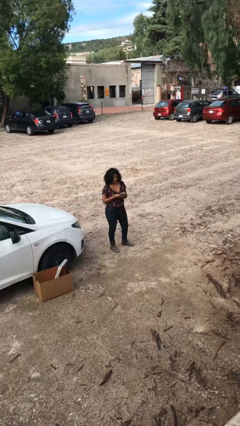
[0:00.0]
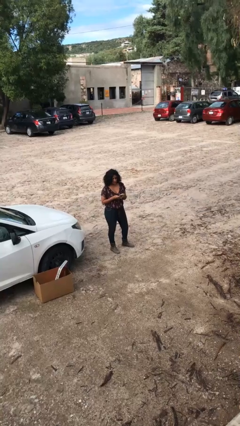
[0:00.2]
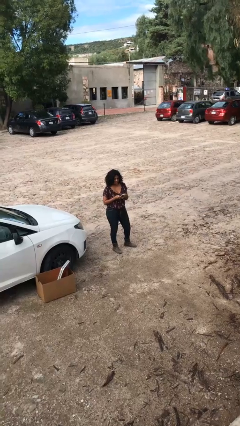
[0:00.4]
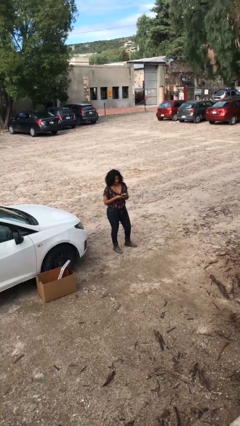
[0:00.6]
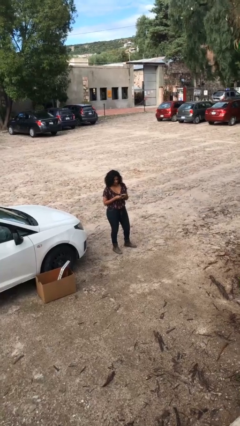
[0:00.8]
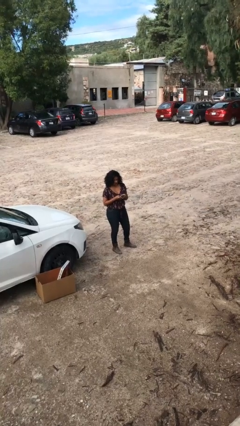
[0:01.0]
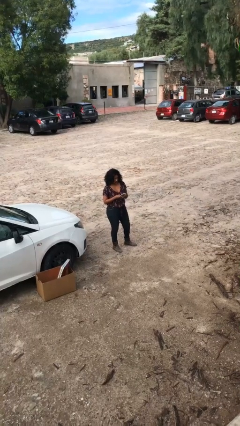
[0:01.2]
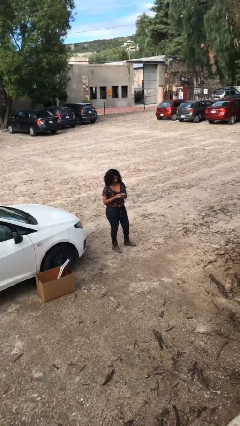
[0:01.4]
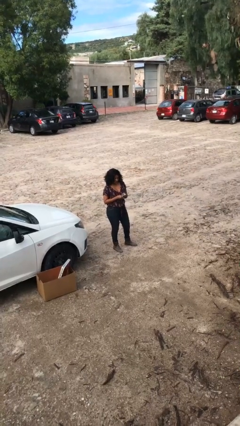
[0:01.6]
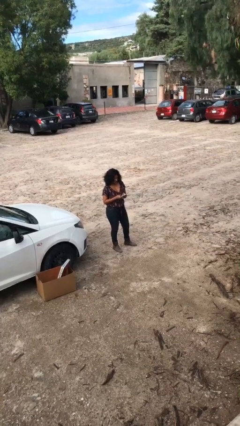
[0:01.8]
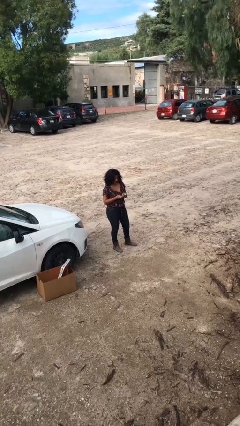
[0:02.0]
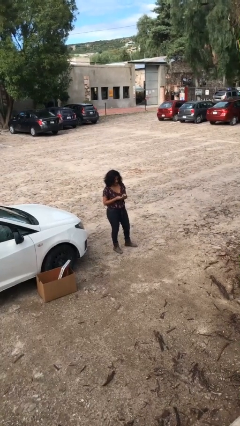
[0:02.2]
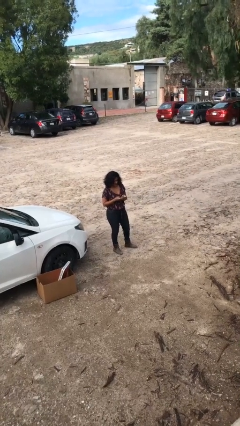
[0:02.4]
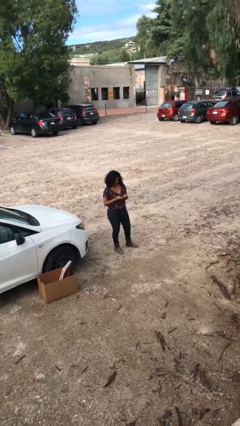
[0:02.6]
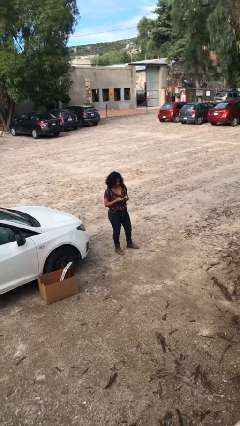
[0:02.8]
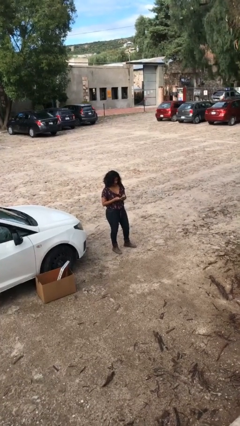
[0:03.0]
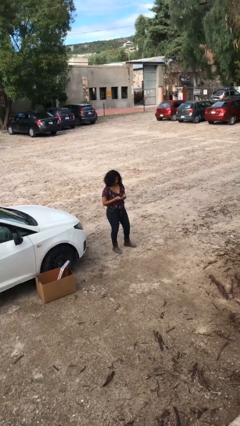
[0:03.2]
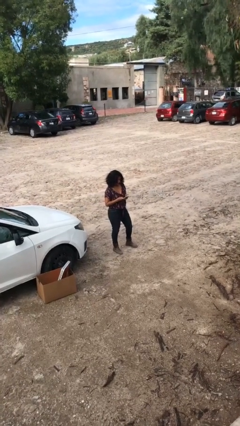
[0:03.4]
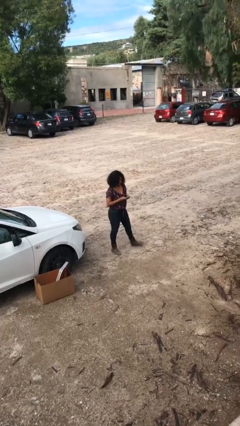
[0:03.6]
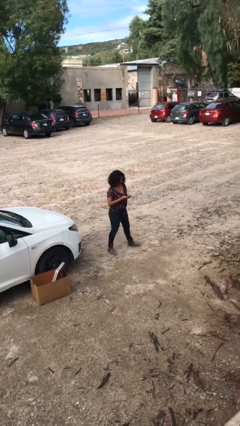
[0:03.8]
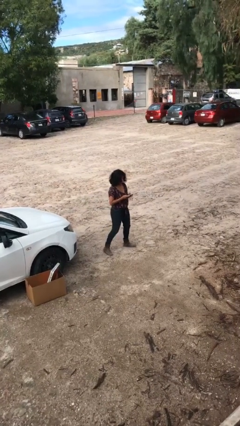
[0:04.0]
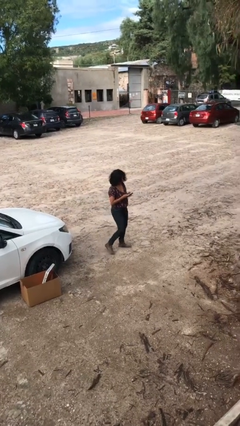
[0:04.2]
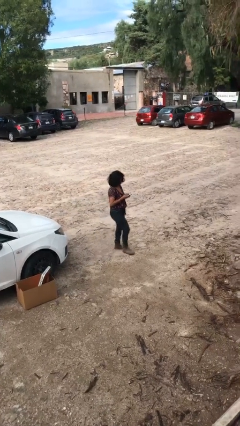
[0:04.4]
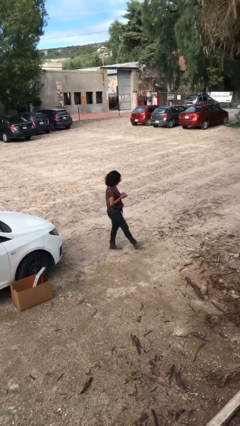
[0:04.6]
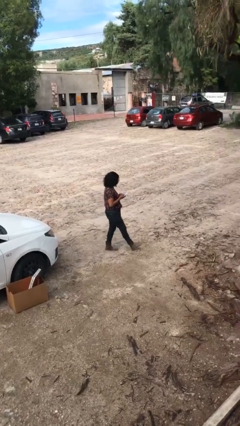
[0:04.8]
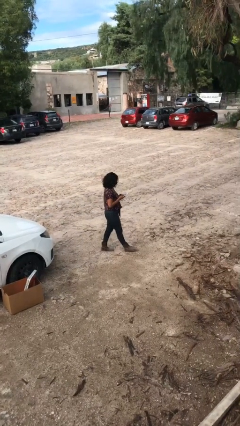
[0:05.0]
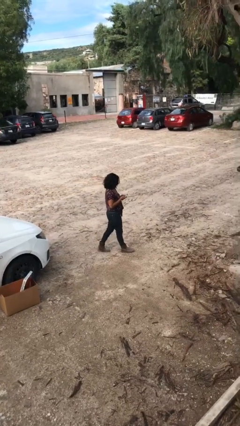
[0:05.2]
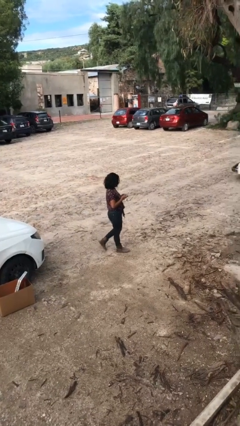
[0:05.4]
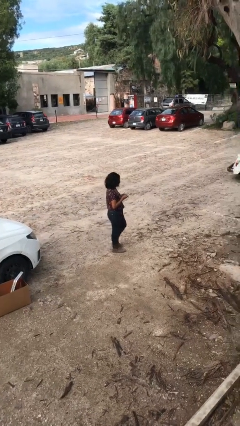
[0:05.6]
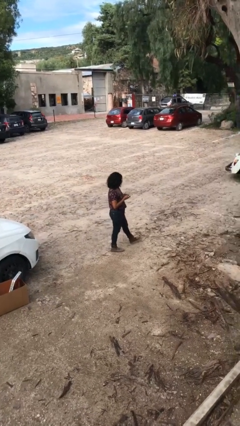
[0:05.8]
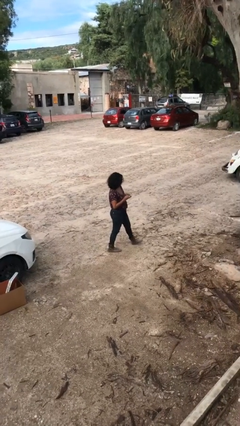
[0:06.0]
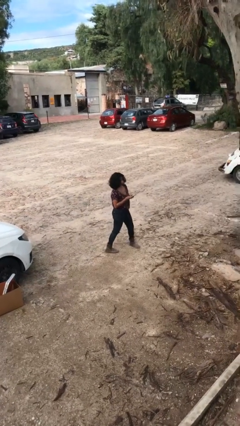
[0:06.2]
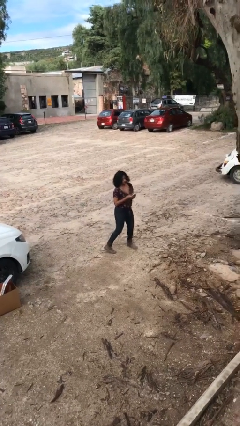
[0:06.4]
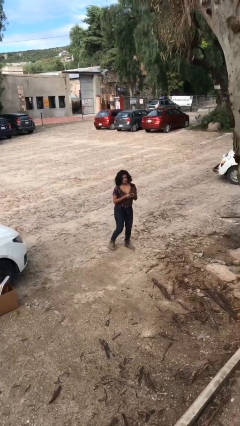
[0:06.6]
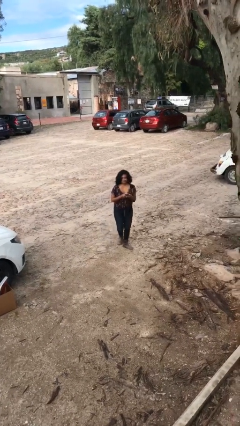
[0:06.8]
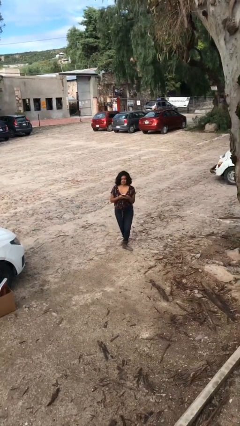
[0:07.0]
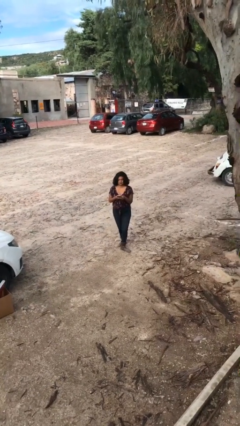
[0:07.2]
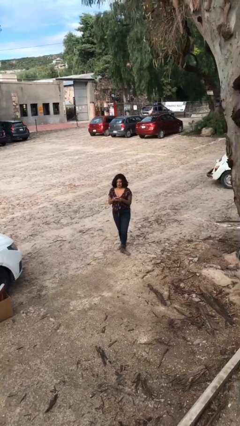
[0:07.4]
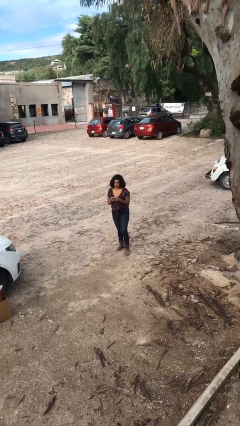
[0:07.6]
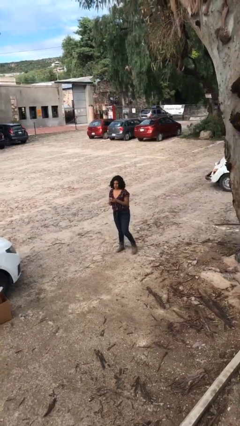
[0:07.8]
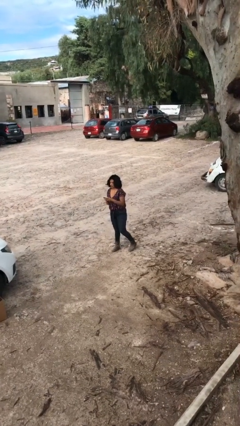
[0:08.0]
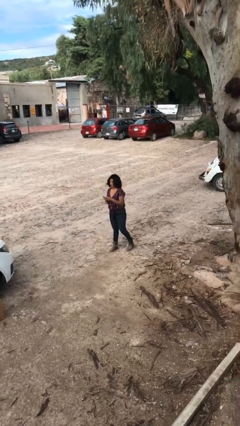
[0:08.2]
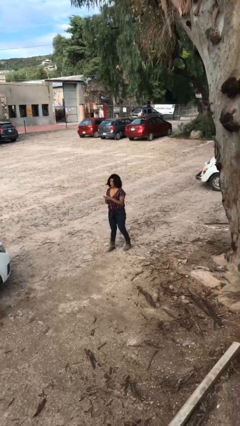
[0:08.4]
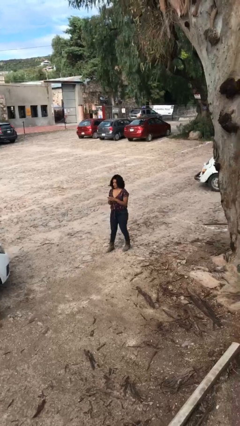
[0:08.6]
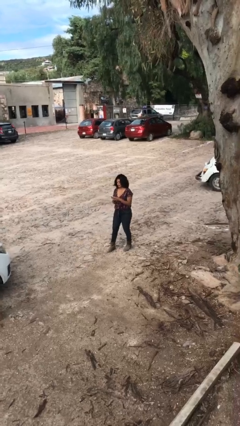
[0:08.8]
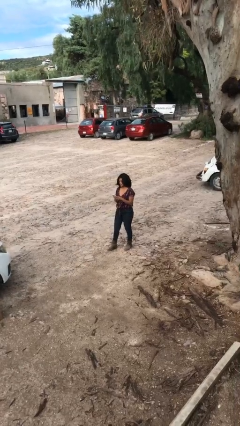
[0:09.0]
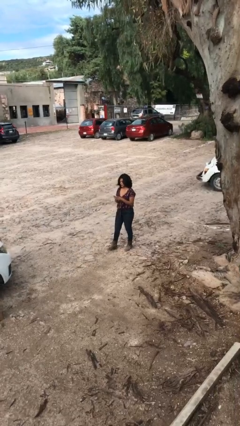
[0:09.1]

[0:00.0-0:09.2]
person texts on phone

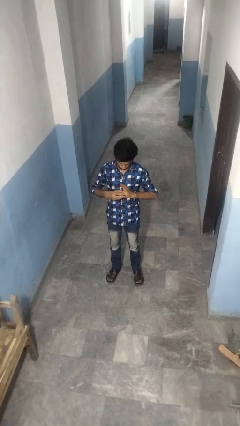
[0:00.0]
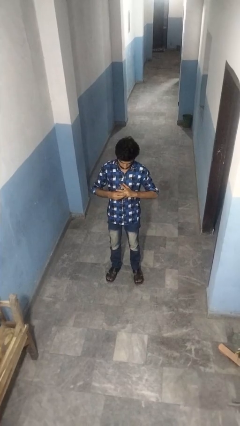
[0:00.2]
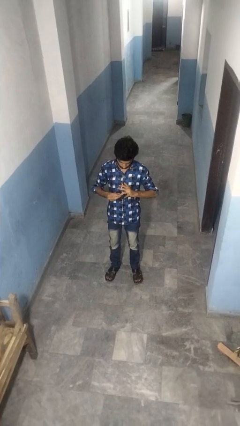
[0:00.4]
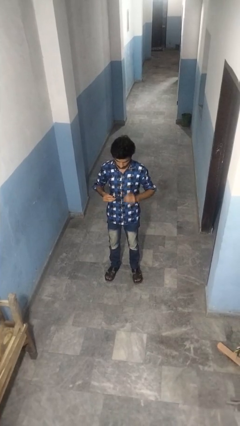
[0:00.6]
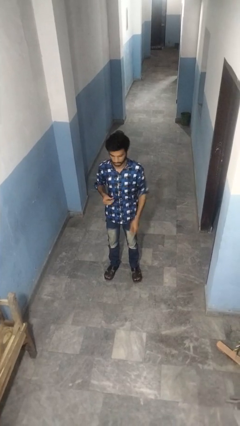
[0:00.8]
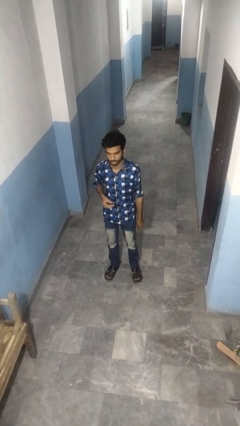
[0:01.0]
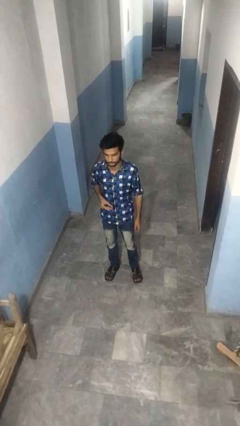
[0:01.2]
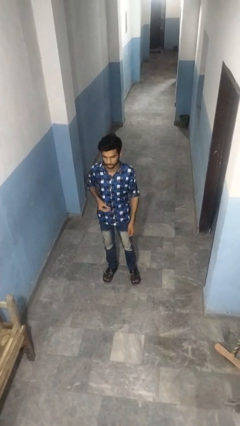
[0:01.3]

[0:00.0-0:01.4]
person takes off ring

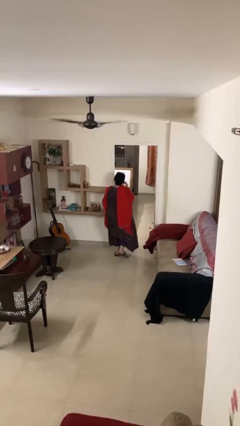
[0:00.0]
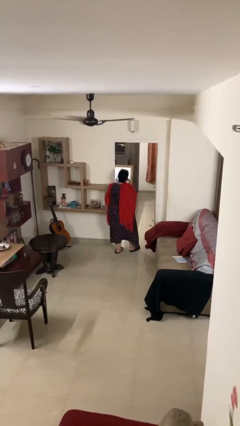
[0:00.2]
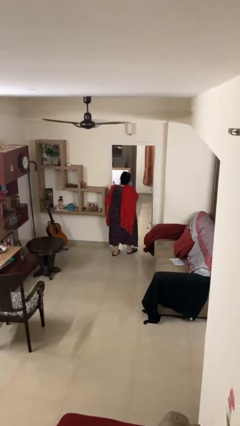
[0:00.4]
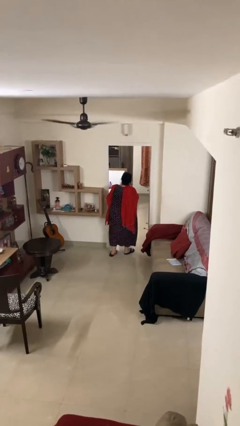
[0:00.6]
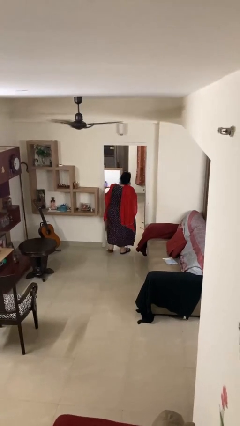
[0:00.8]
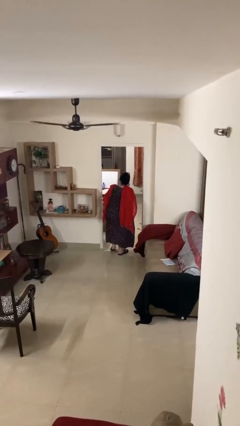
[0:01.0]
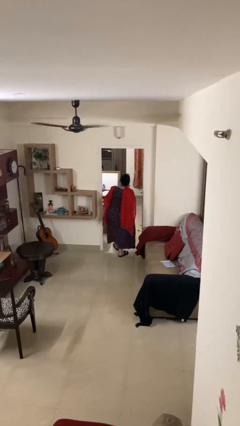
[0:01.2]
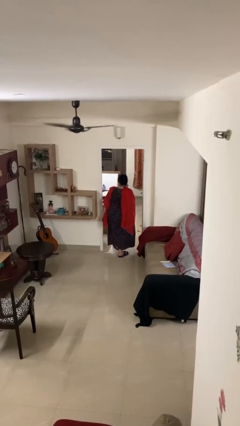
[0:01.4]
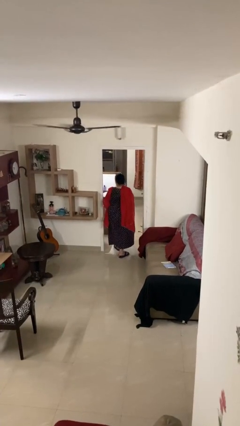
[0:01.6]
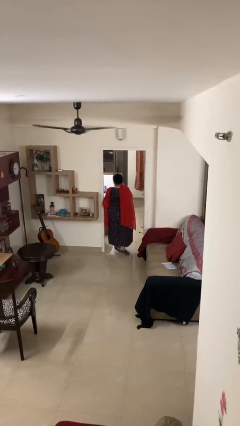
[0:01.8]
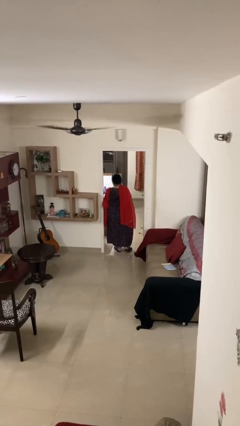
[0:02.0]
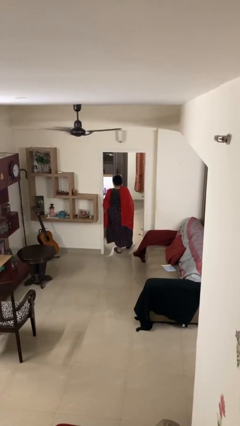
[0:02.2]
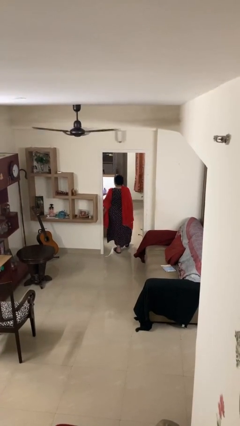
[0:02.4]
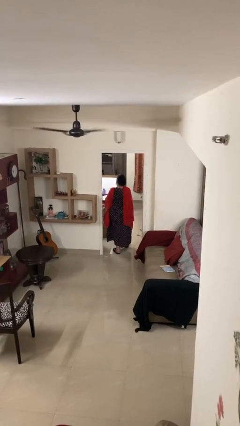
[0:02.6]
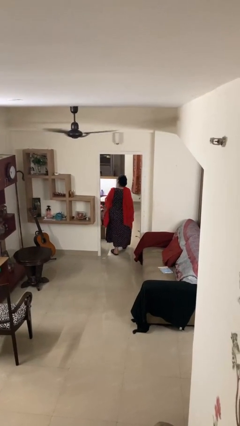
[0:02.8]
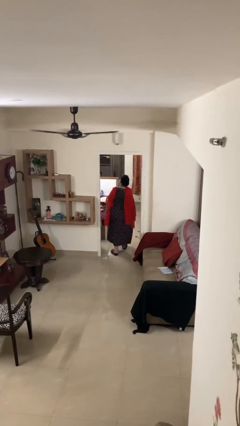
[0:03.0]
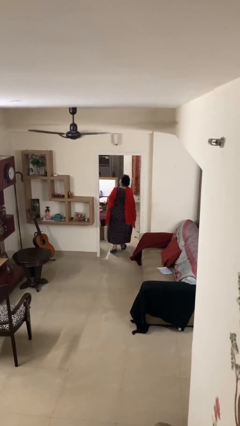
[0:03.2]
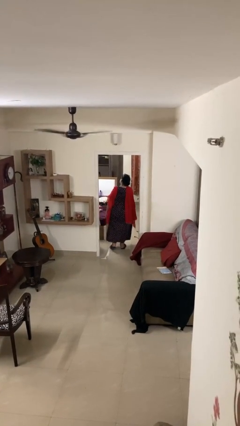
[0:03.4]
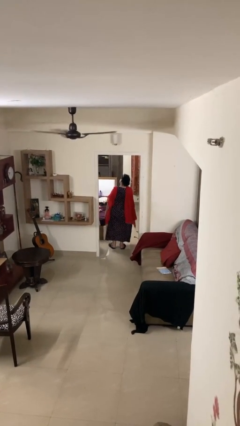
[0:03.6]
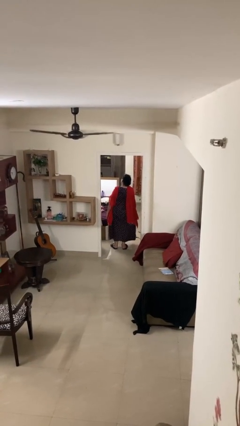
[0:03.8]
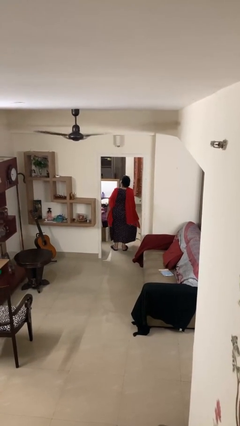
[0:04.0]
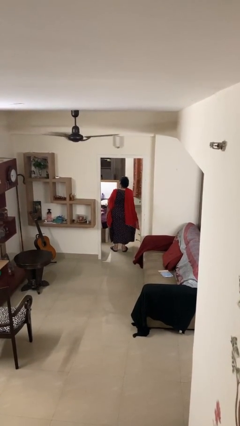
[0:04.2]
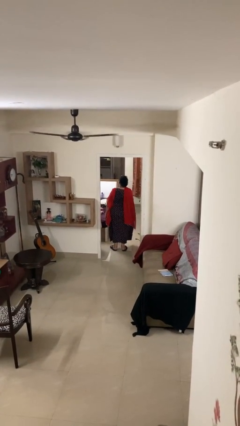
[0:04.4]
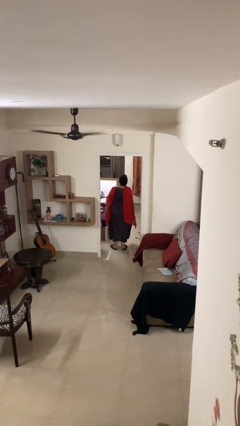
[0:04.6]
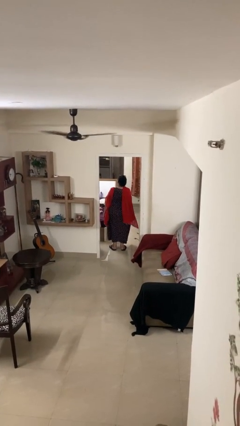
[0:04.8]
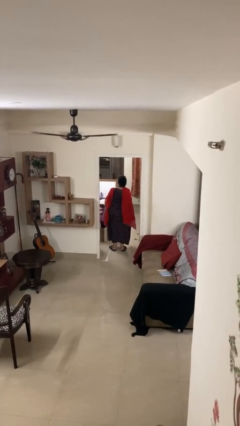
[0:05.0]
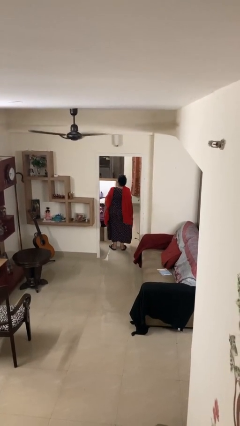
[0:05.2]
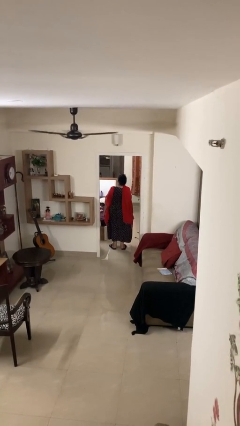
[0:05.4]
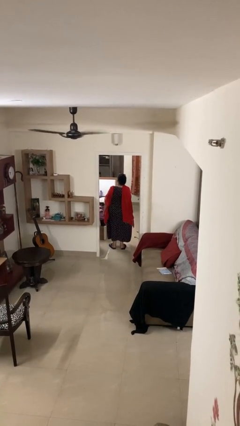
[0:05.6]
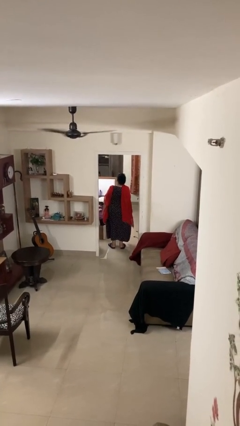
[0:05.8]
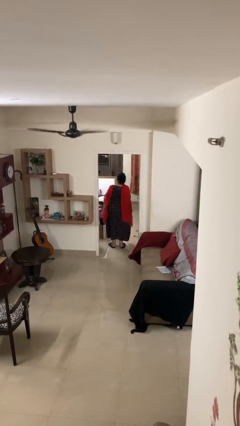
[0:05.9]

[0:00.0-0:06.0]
person exits scene through structure

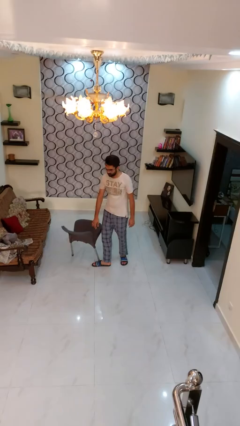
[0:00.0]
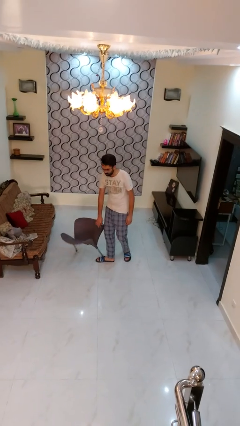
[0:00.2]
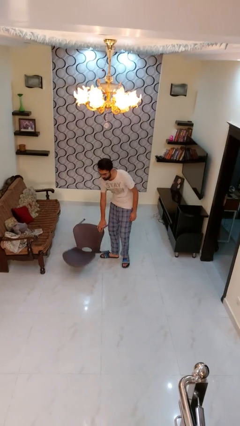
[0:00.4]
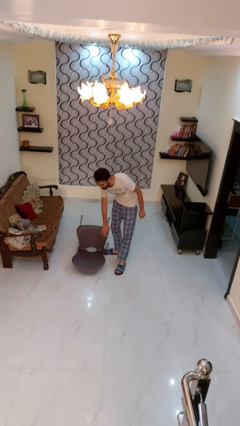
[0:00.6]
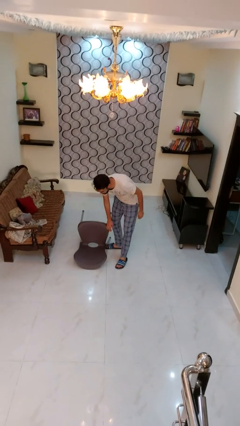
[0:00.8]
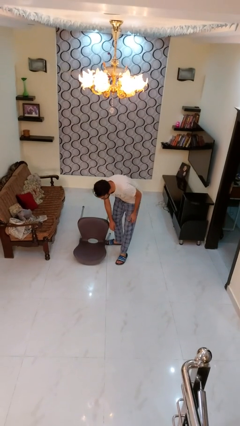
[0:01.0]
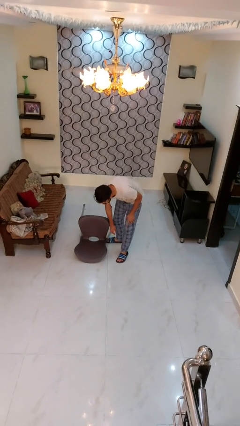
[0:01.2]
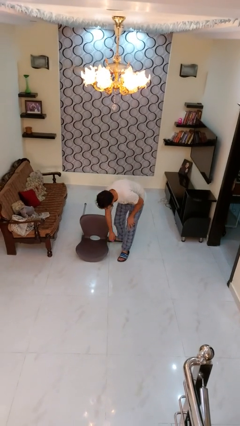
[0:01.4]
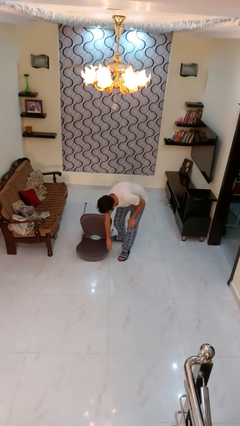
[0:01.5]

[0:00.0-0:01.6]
person knocks over furniture
